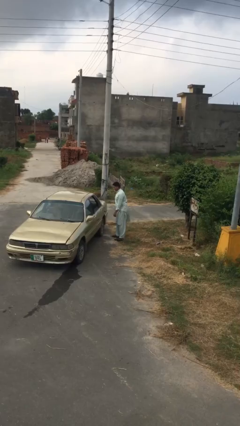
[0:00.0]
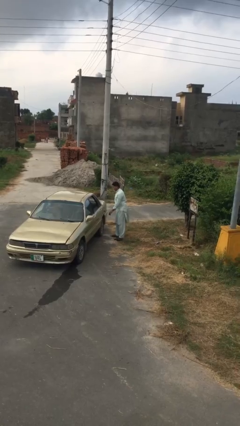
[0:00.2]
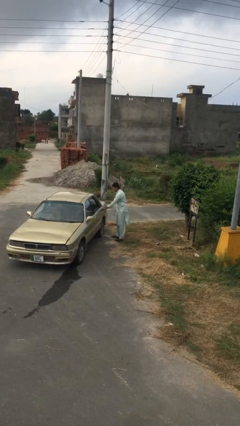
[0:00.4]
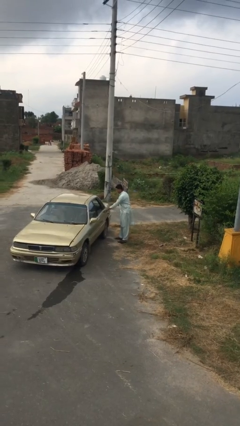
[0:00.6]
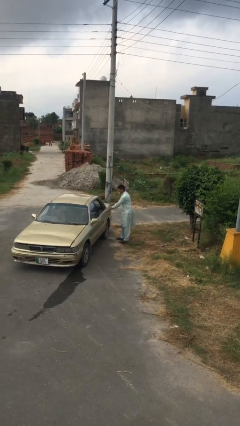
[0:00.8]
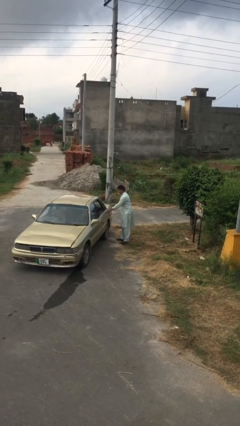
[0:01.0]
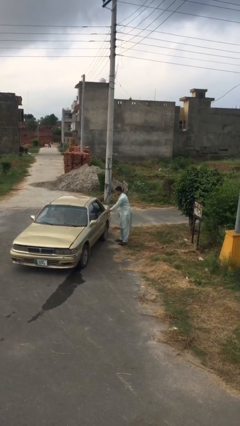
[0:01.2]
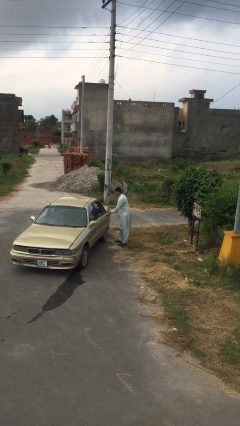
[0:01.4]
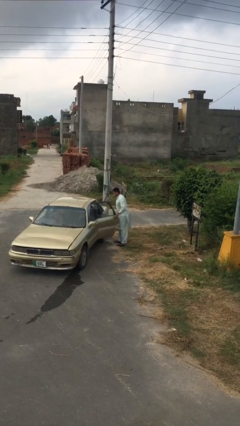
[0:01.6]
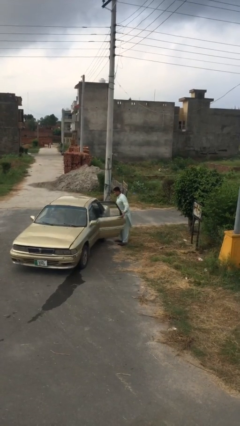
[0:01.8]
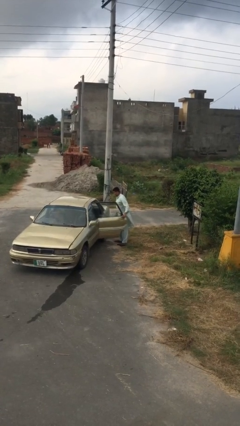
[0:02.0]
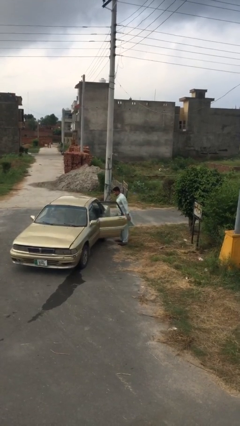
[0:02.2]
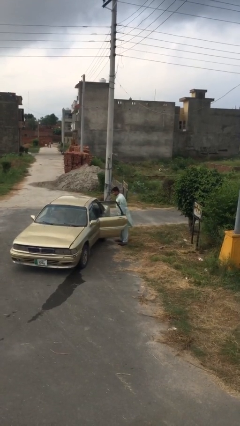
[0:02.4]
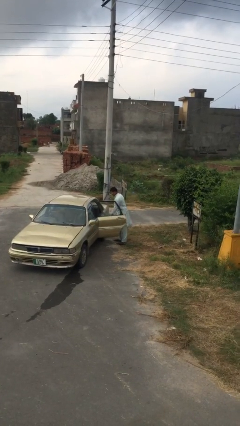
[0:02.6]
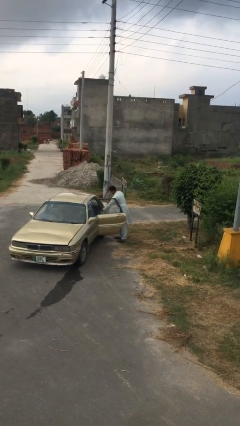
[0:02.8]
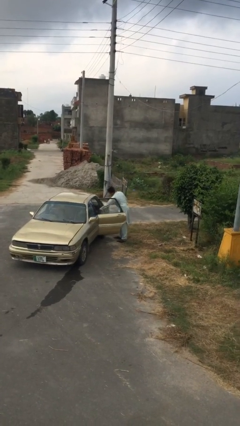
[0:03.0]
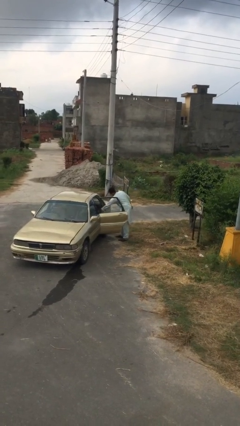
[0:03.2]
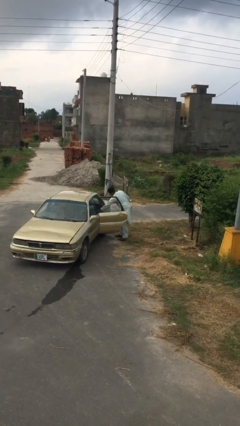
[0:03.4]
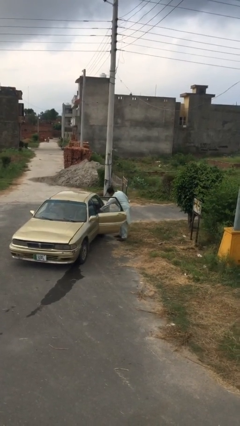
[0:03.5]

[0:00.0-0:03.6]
person opens car door

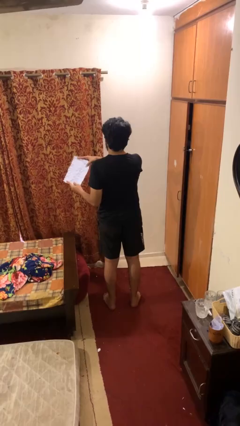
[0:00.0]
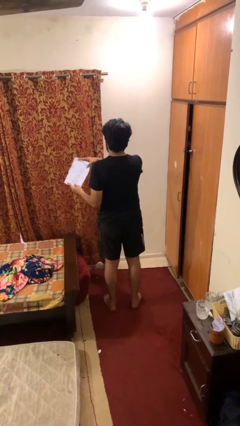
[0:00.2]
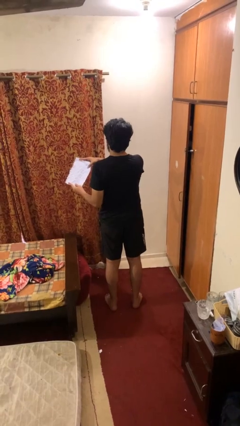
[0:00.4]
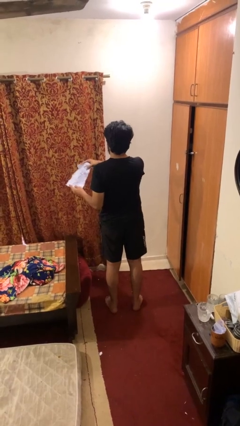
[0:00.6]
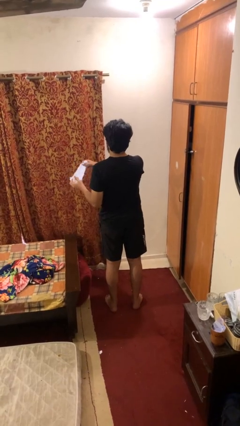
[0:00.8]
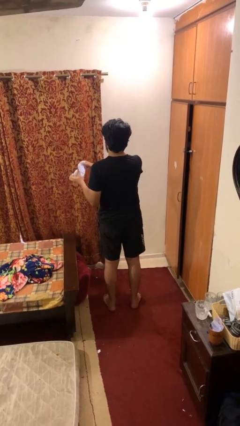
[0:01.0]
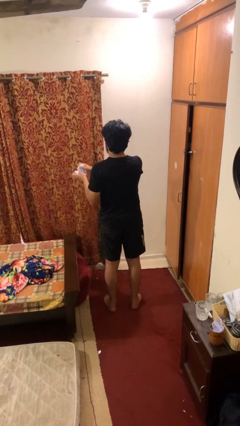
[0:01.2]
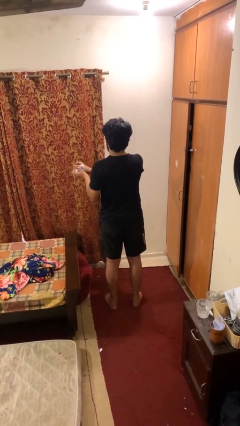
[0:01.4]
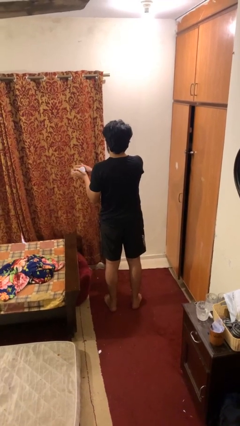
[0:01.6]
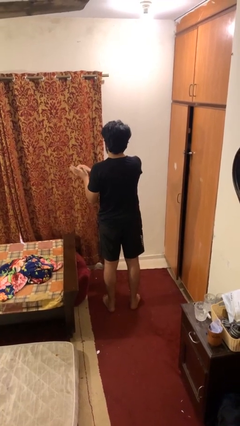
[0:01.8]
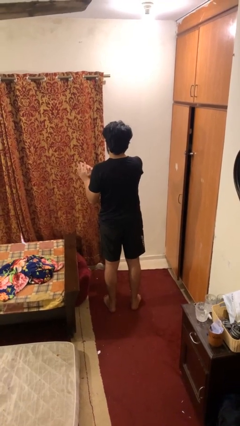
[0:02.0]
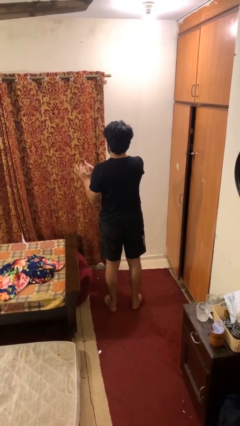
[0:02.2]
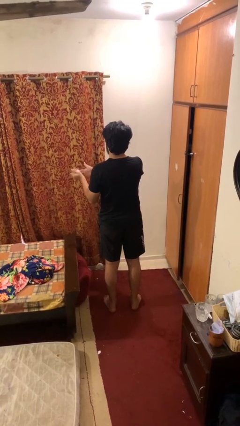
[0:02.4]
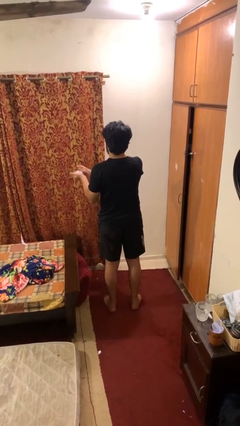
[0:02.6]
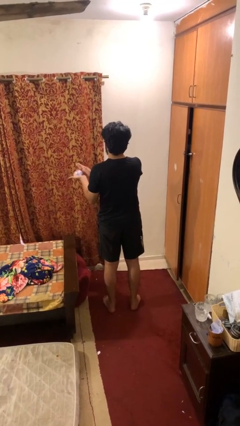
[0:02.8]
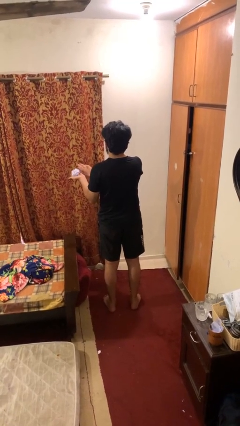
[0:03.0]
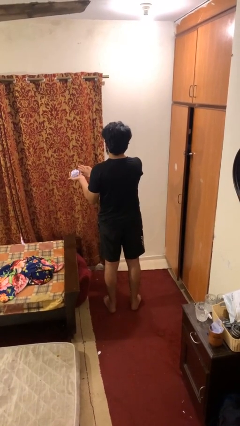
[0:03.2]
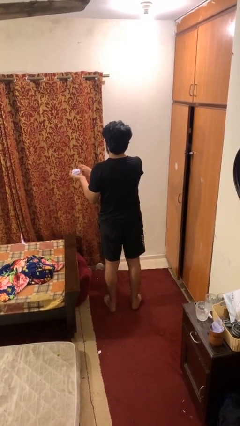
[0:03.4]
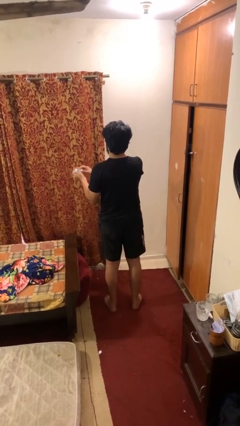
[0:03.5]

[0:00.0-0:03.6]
person crumples paper

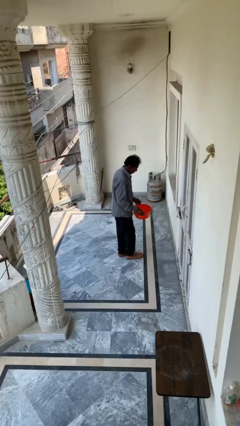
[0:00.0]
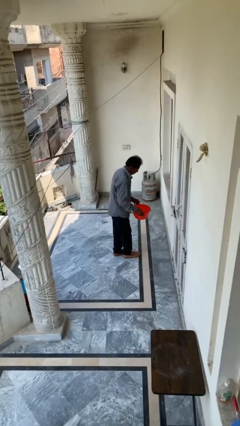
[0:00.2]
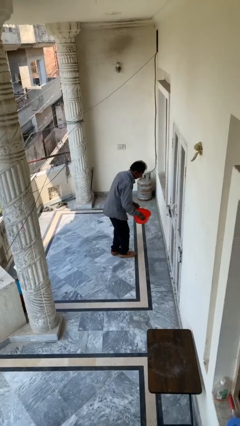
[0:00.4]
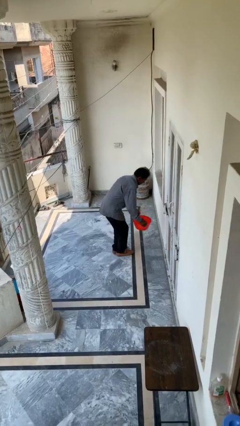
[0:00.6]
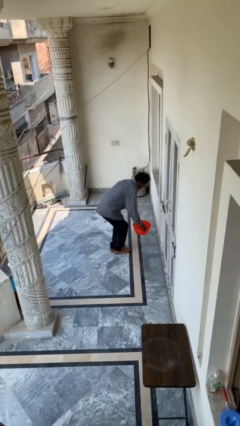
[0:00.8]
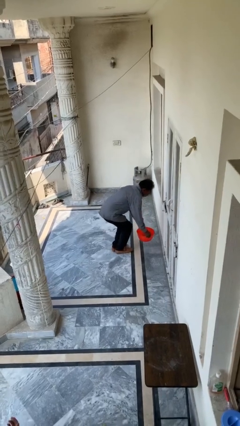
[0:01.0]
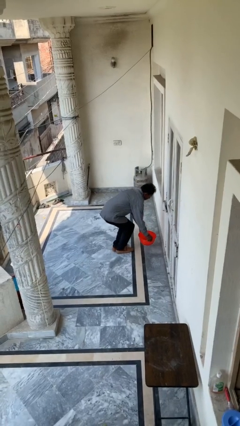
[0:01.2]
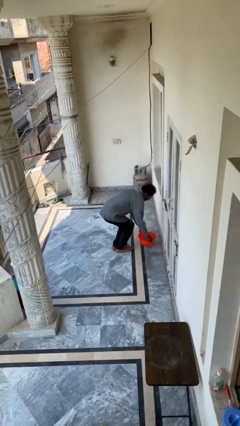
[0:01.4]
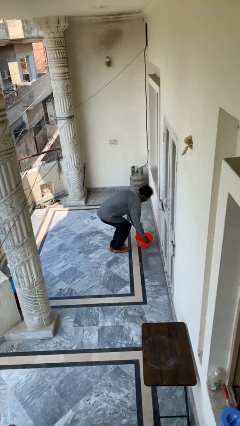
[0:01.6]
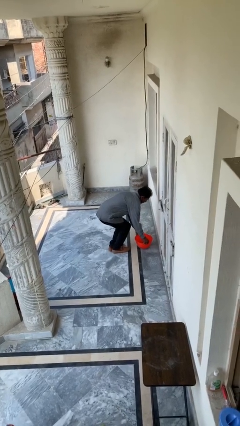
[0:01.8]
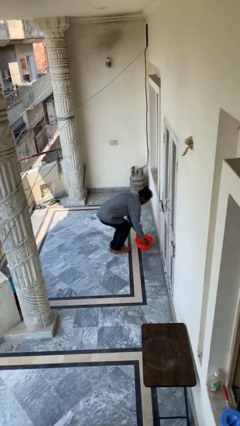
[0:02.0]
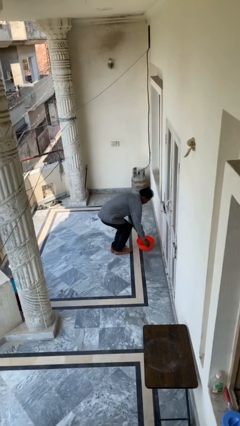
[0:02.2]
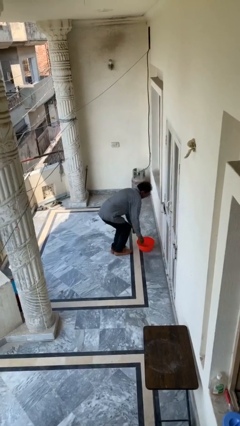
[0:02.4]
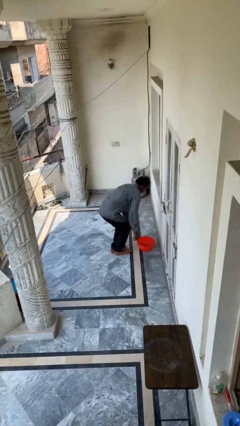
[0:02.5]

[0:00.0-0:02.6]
person puts down object on floor

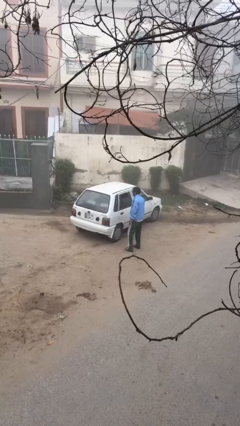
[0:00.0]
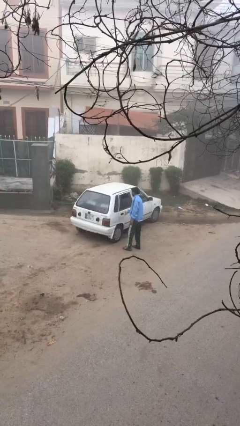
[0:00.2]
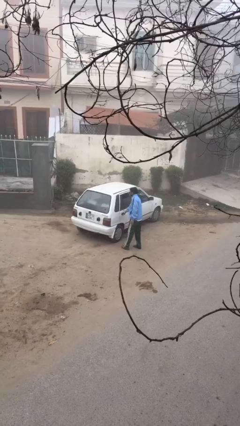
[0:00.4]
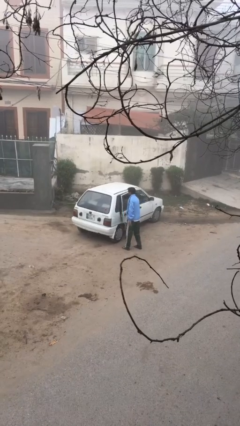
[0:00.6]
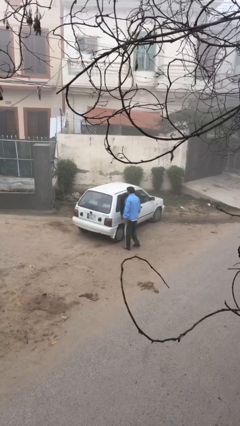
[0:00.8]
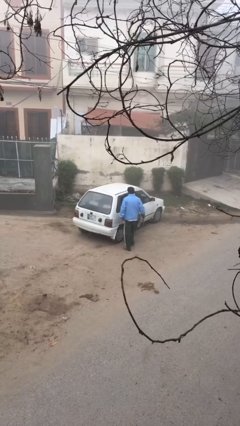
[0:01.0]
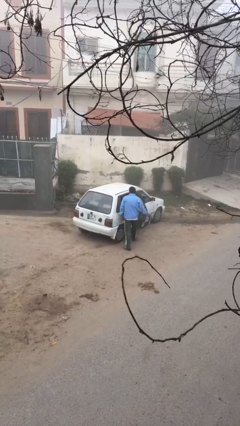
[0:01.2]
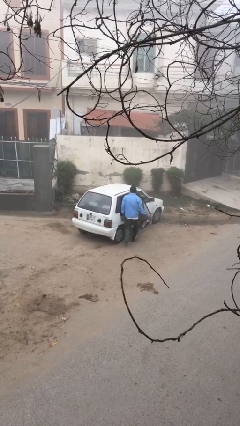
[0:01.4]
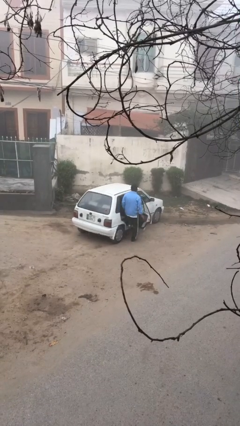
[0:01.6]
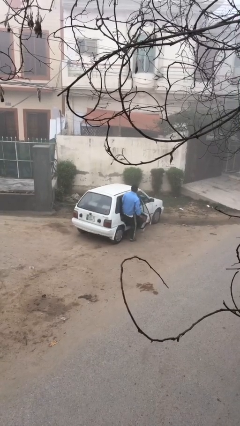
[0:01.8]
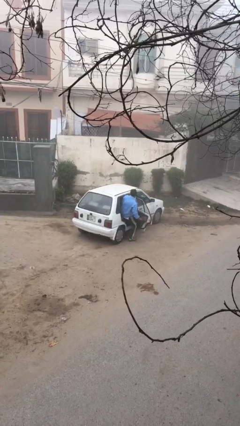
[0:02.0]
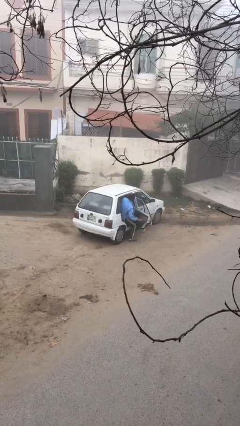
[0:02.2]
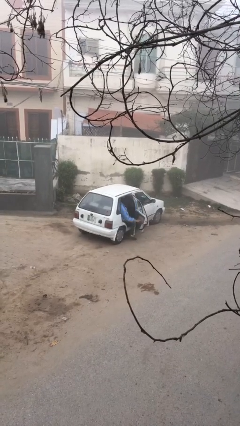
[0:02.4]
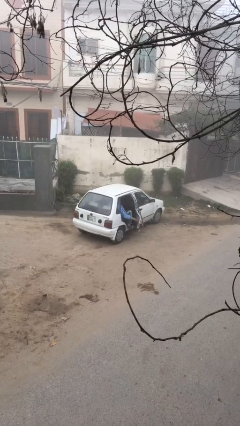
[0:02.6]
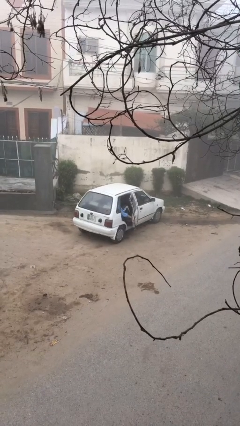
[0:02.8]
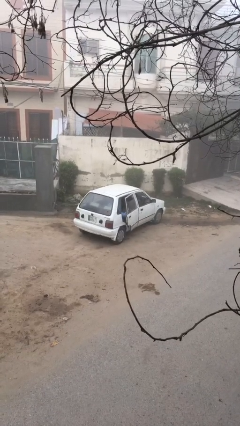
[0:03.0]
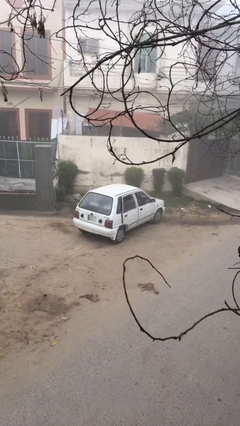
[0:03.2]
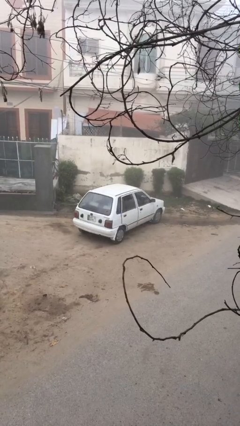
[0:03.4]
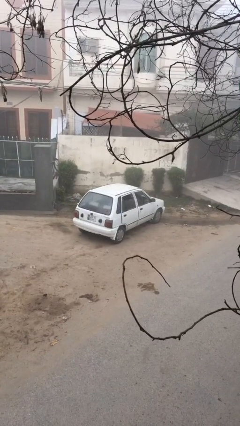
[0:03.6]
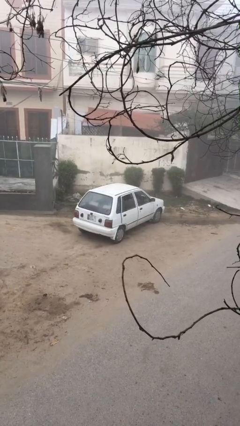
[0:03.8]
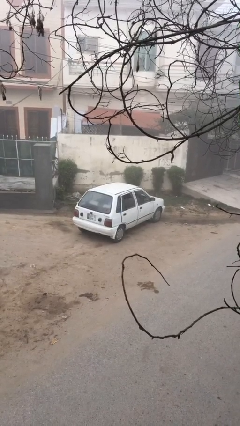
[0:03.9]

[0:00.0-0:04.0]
car picks up person

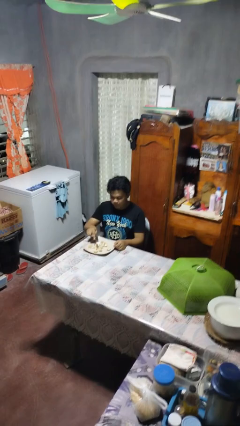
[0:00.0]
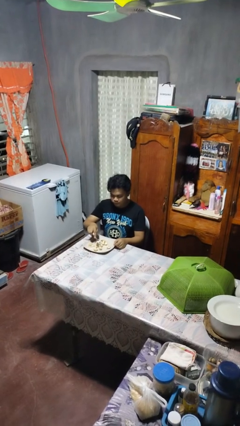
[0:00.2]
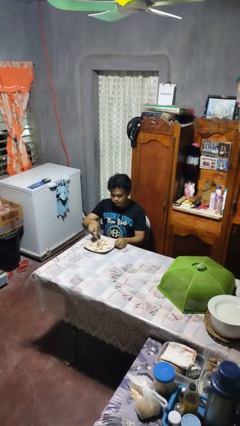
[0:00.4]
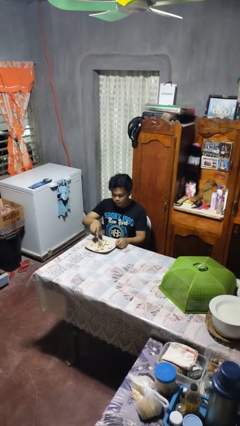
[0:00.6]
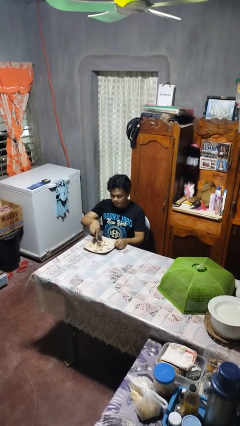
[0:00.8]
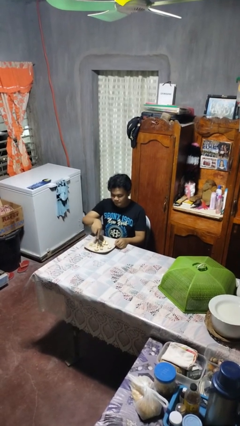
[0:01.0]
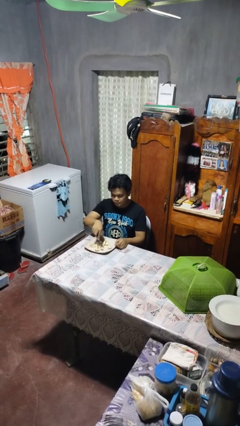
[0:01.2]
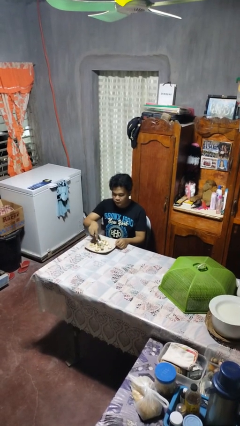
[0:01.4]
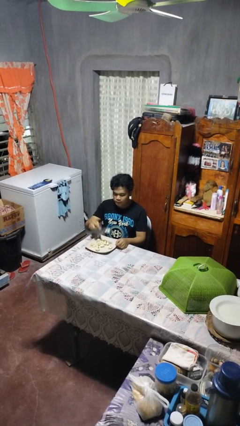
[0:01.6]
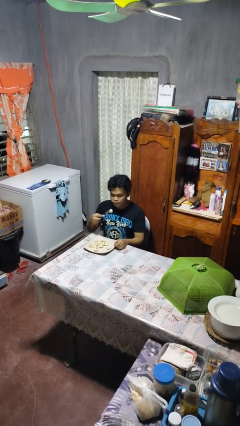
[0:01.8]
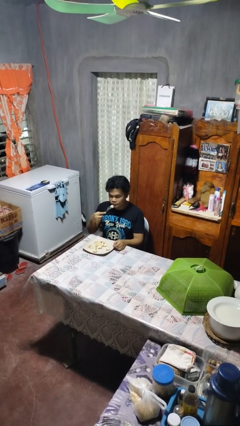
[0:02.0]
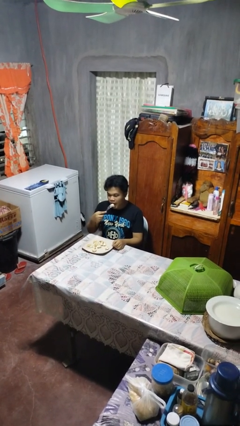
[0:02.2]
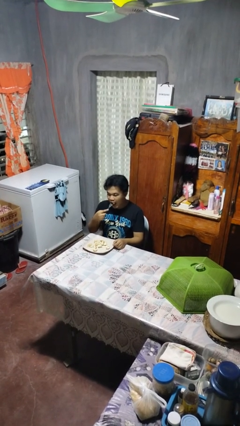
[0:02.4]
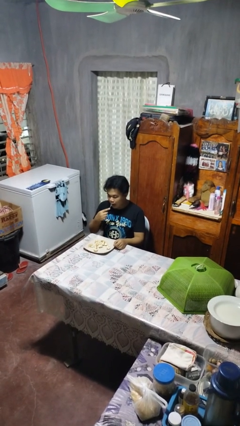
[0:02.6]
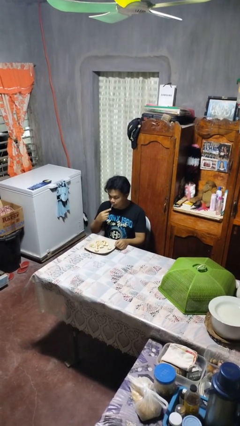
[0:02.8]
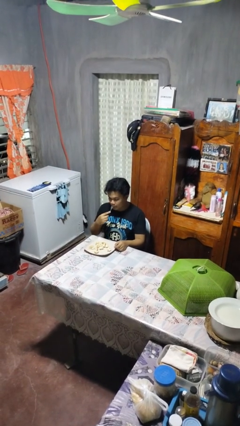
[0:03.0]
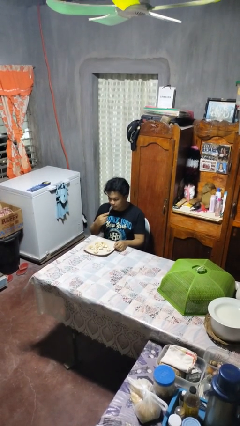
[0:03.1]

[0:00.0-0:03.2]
person eats with utensil

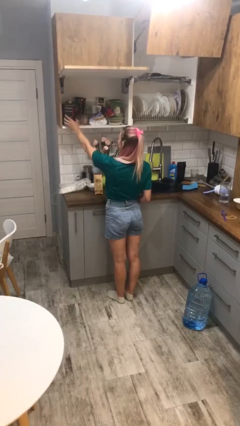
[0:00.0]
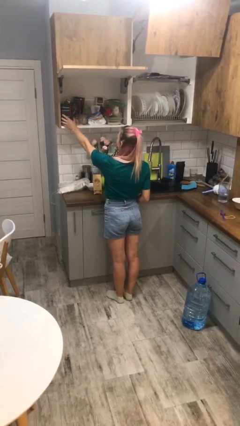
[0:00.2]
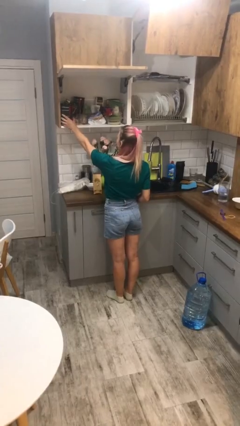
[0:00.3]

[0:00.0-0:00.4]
person puts down object into cabinet
